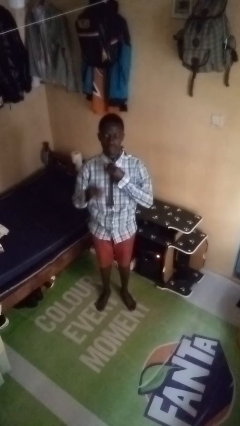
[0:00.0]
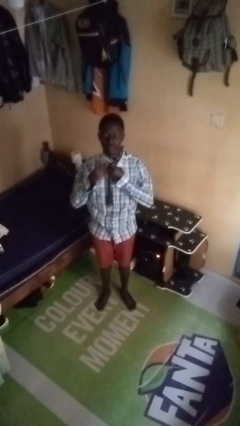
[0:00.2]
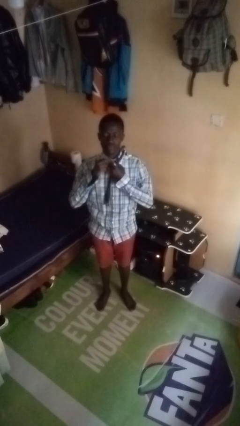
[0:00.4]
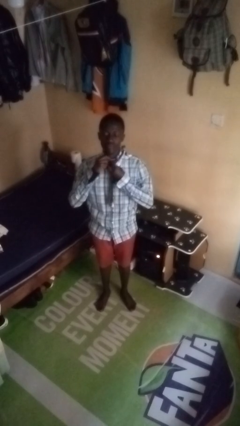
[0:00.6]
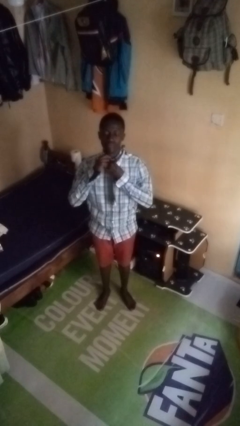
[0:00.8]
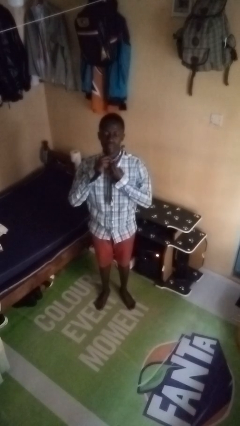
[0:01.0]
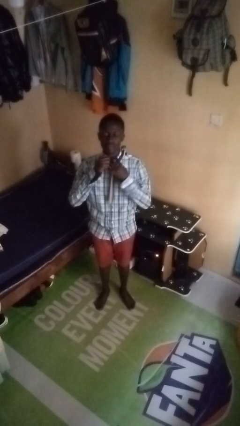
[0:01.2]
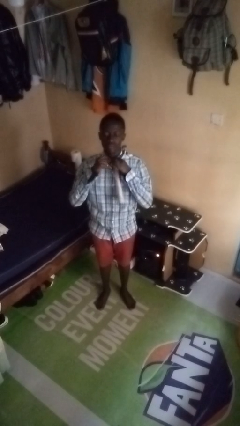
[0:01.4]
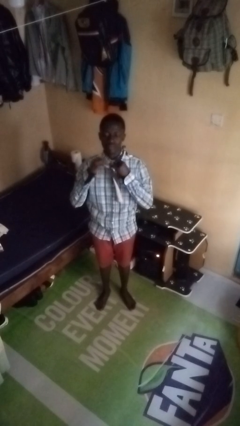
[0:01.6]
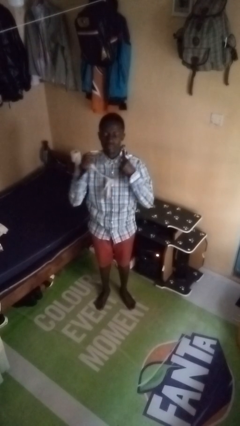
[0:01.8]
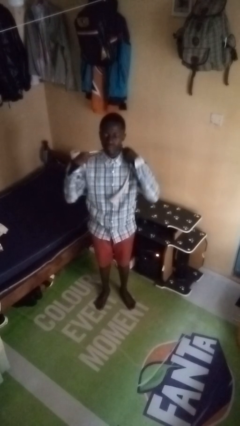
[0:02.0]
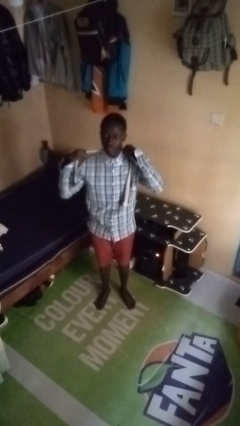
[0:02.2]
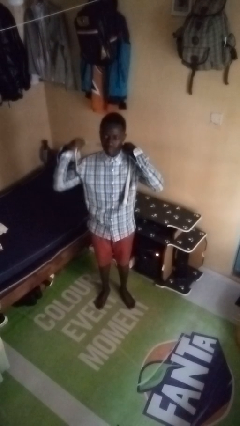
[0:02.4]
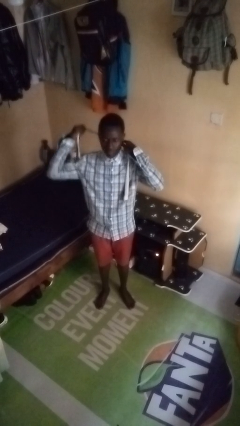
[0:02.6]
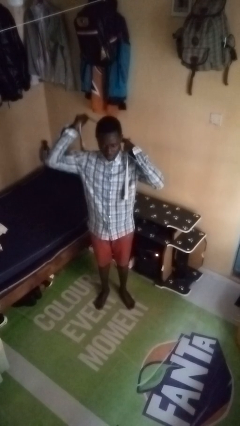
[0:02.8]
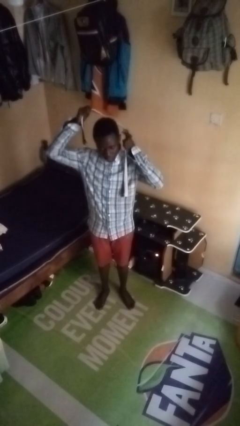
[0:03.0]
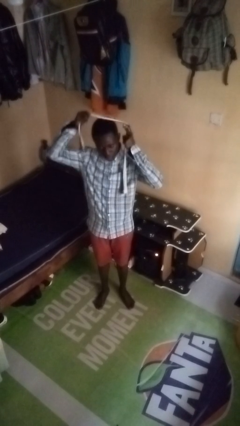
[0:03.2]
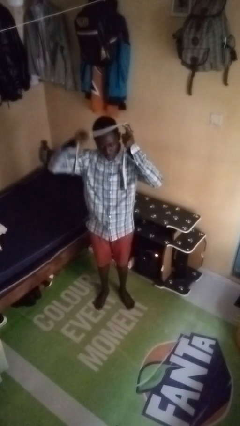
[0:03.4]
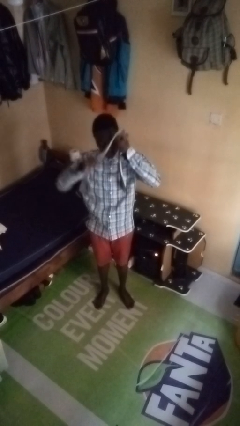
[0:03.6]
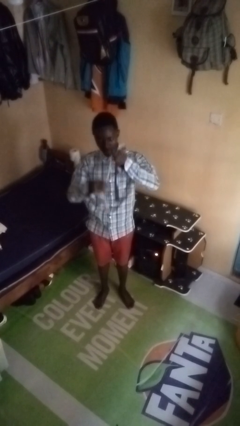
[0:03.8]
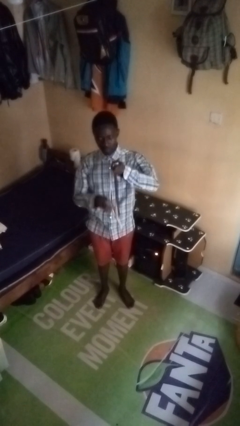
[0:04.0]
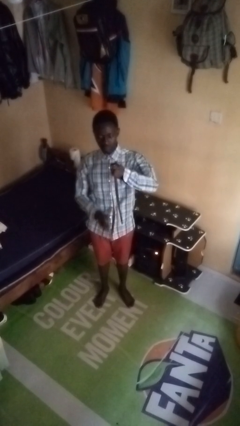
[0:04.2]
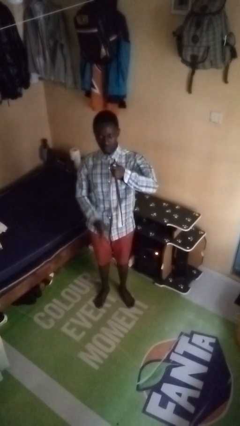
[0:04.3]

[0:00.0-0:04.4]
person takes off necktie

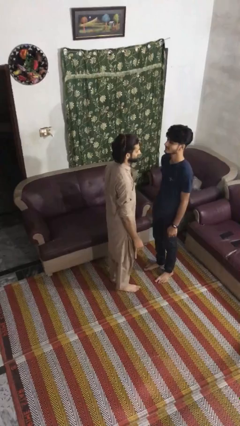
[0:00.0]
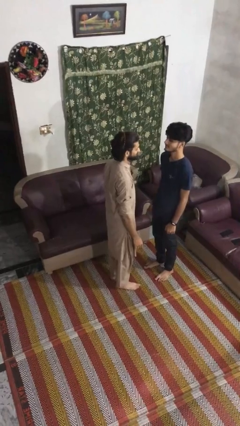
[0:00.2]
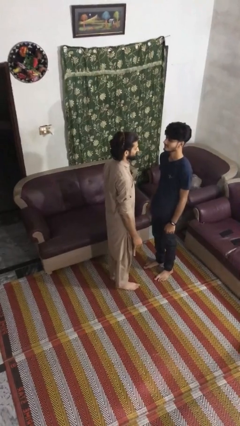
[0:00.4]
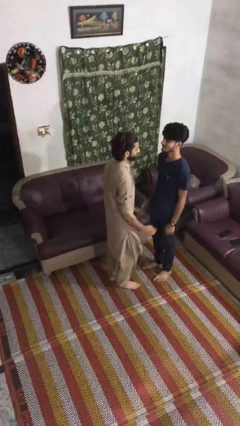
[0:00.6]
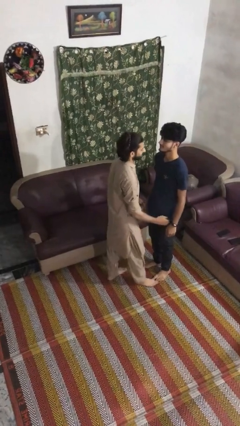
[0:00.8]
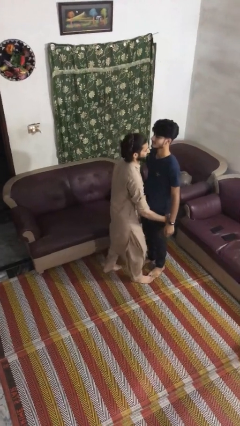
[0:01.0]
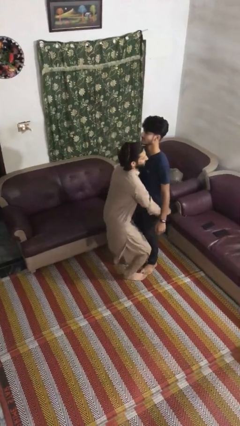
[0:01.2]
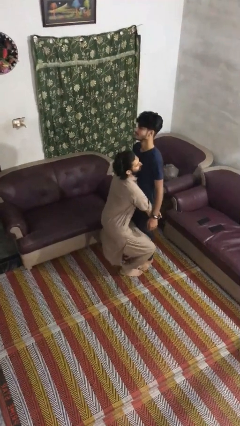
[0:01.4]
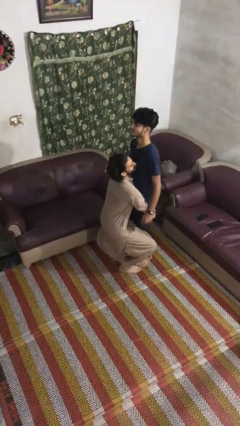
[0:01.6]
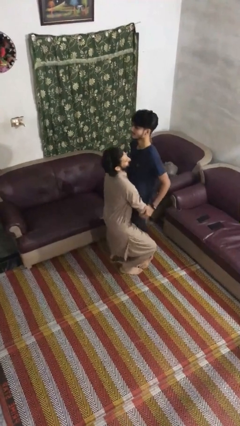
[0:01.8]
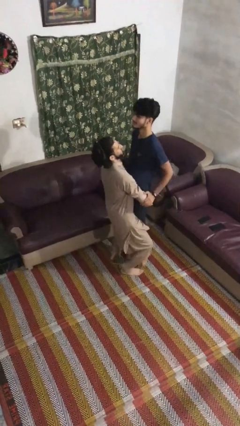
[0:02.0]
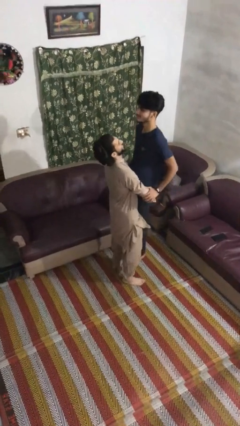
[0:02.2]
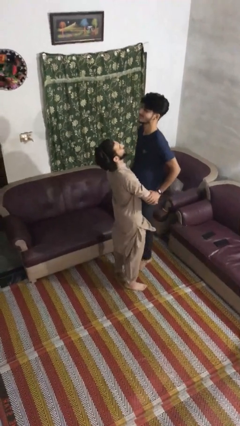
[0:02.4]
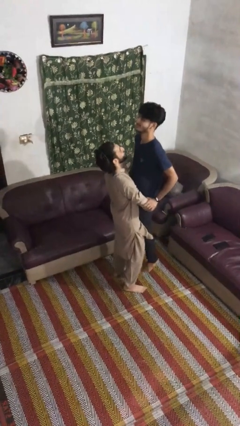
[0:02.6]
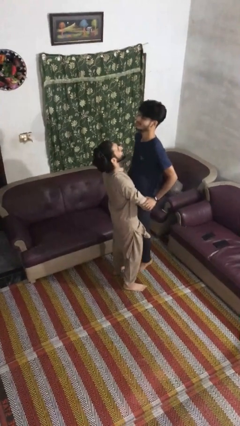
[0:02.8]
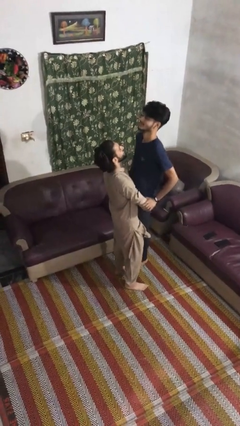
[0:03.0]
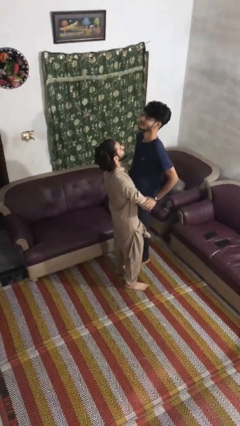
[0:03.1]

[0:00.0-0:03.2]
person picks up person

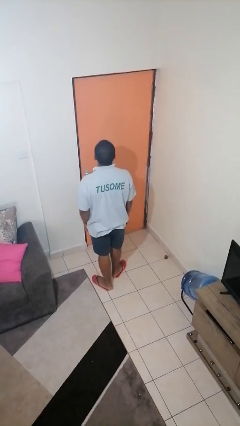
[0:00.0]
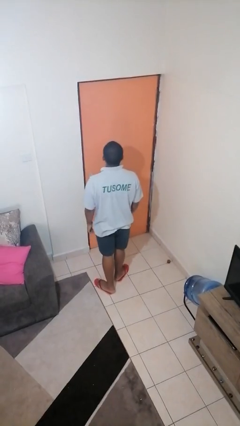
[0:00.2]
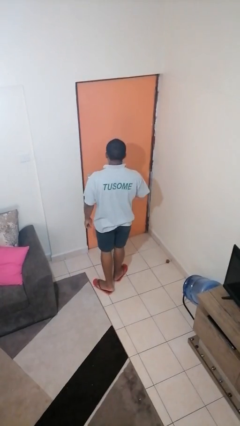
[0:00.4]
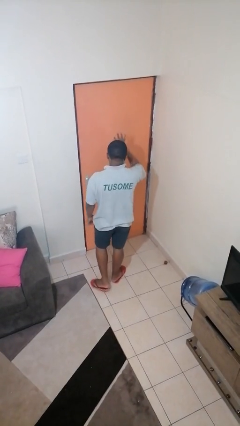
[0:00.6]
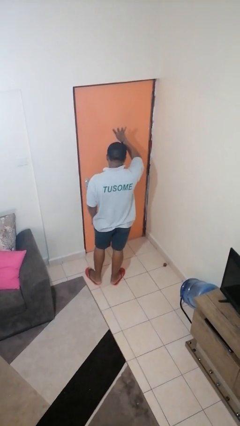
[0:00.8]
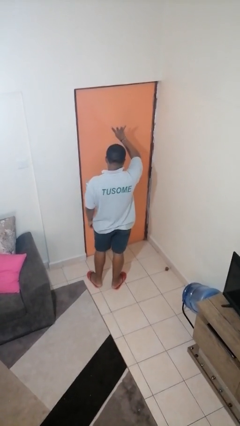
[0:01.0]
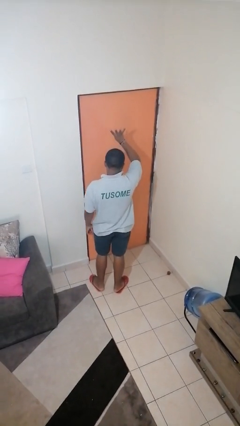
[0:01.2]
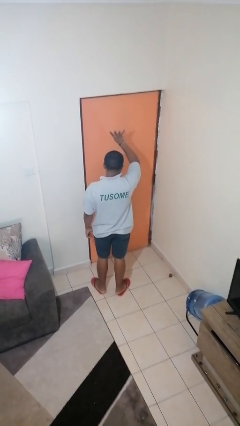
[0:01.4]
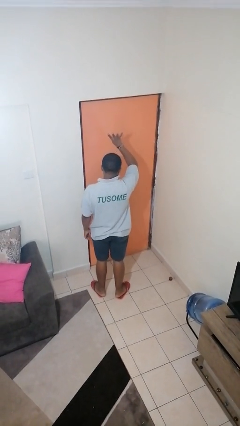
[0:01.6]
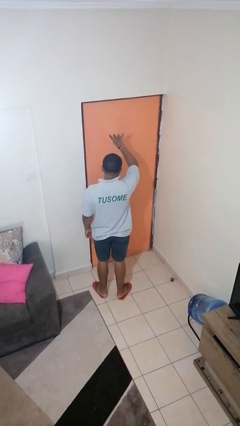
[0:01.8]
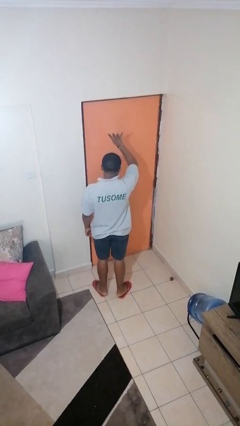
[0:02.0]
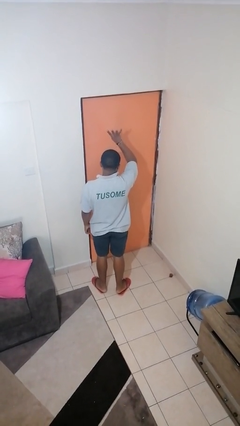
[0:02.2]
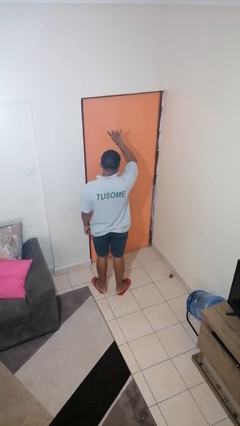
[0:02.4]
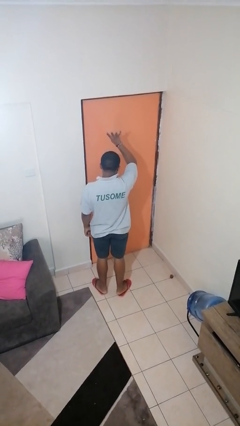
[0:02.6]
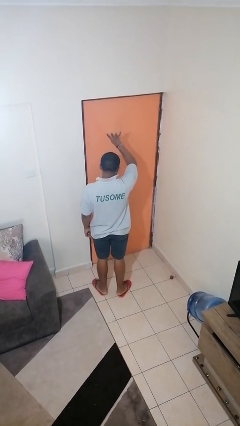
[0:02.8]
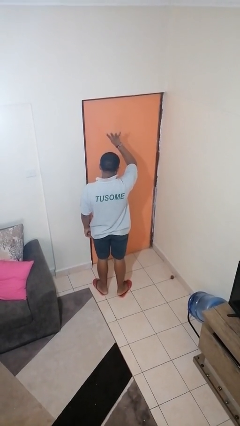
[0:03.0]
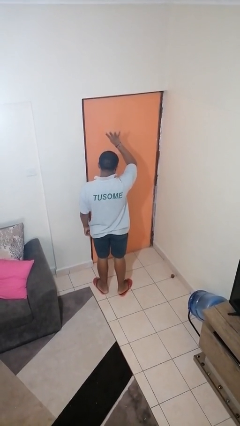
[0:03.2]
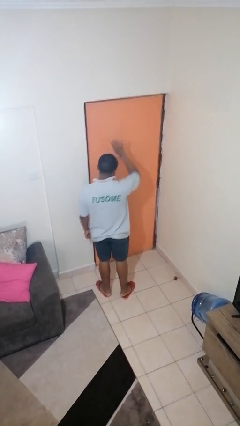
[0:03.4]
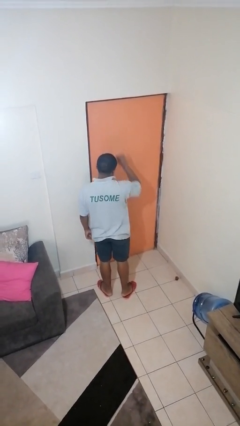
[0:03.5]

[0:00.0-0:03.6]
person gestures number four

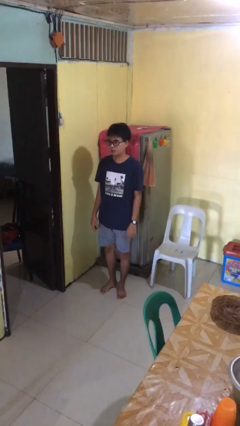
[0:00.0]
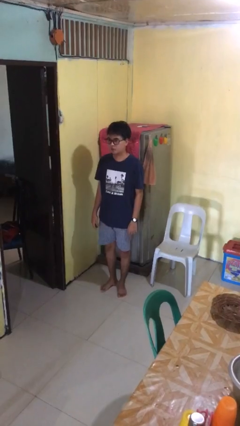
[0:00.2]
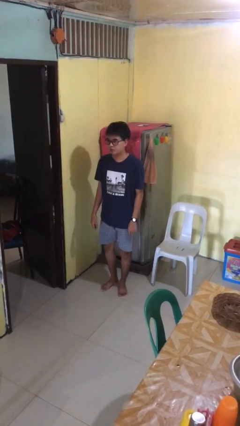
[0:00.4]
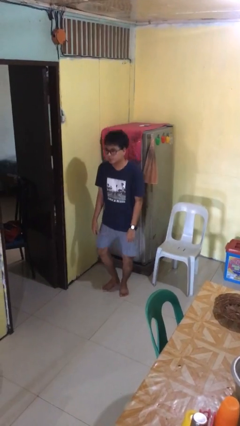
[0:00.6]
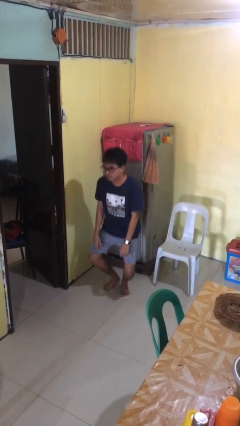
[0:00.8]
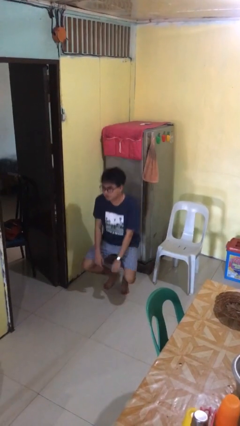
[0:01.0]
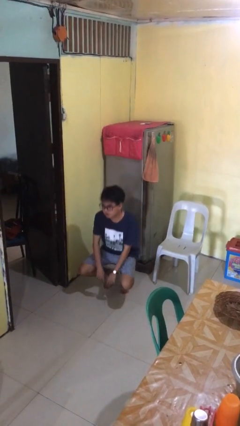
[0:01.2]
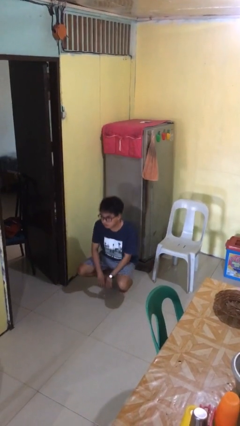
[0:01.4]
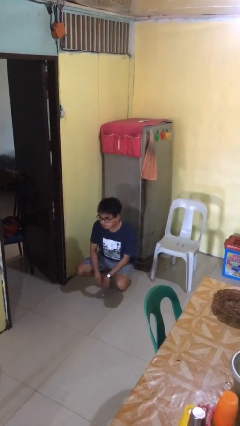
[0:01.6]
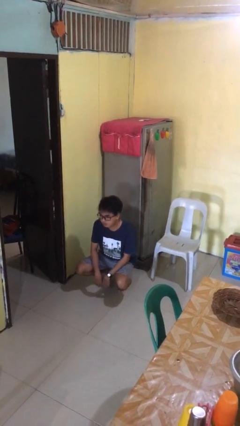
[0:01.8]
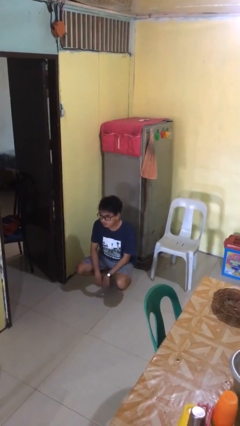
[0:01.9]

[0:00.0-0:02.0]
person squats

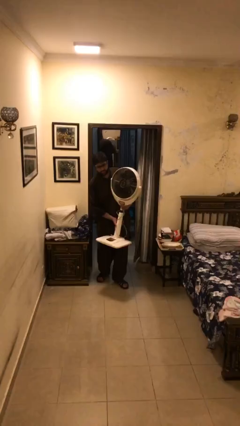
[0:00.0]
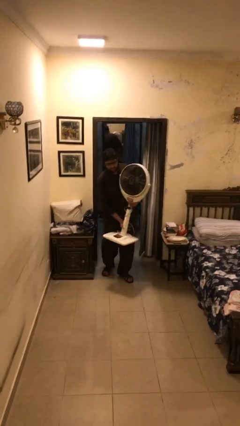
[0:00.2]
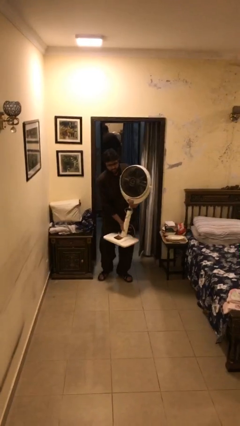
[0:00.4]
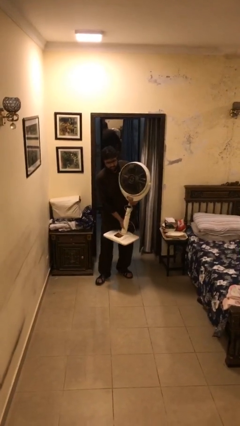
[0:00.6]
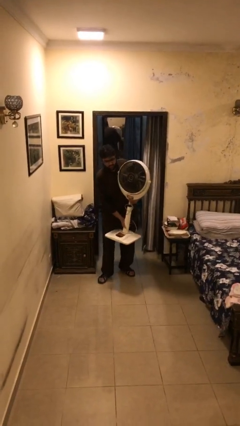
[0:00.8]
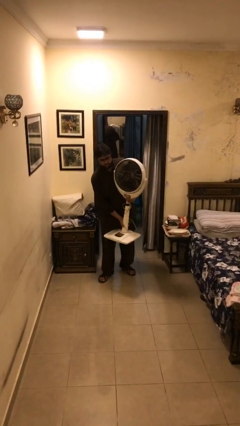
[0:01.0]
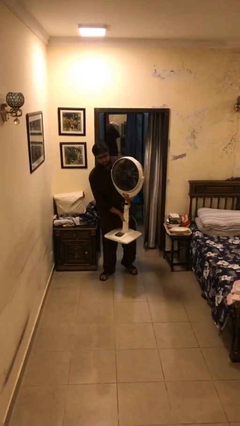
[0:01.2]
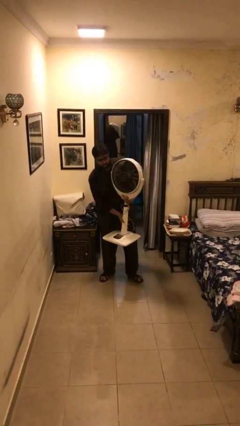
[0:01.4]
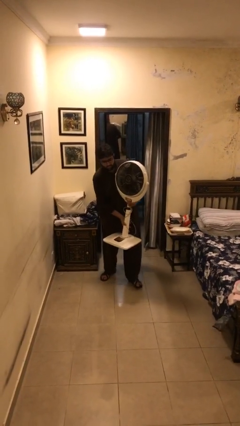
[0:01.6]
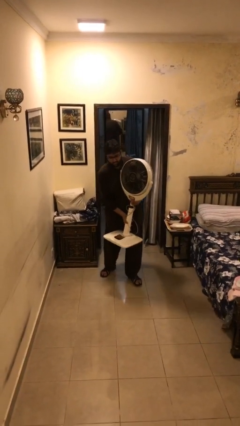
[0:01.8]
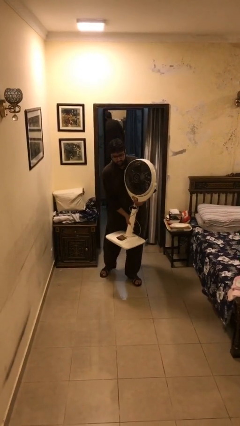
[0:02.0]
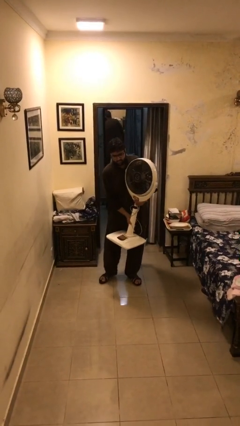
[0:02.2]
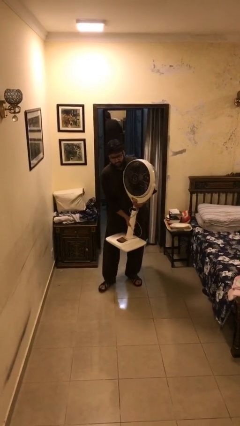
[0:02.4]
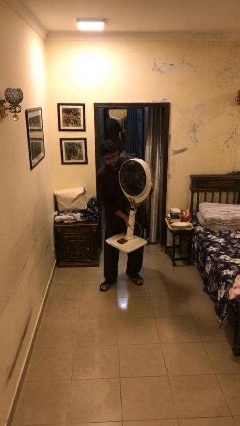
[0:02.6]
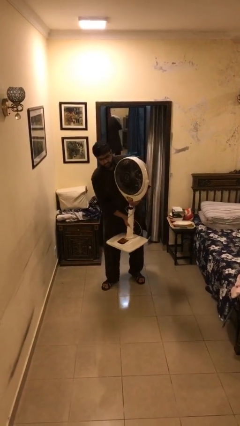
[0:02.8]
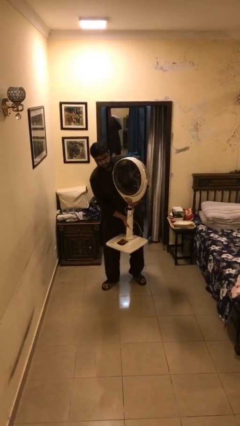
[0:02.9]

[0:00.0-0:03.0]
person carries heavy object

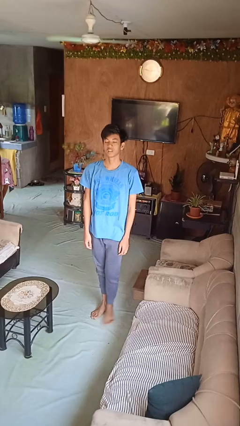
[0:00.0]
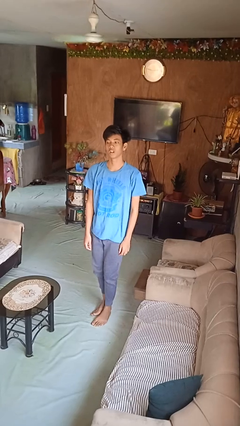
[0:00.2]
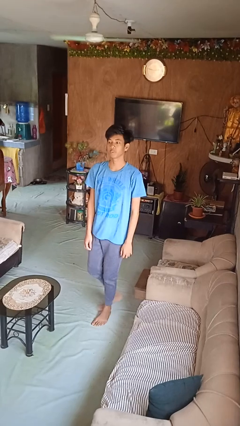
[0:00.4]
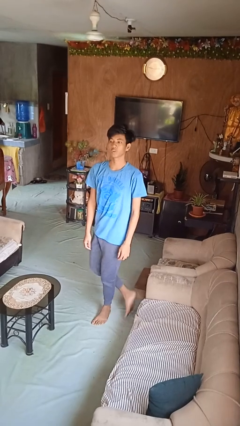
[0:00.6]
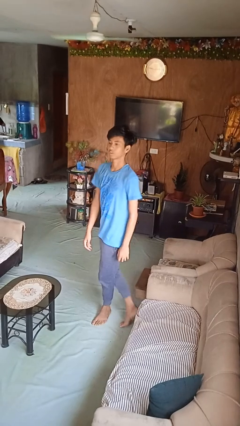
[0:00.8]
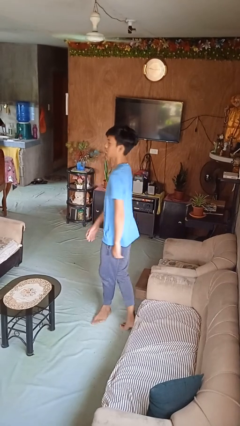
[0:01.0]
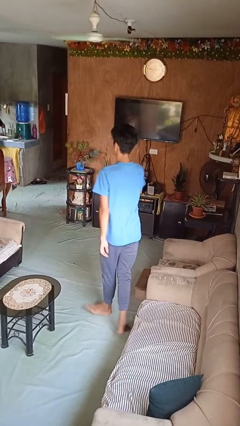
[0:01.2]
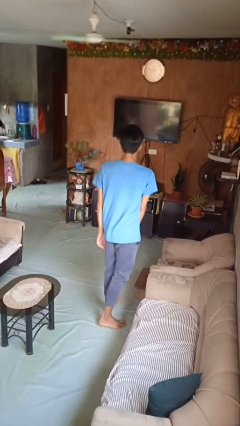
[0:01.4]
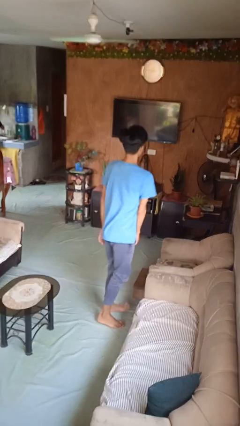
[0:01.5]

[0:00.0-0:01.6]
person twirls
